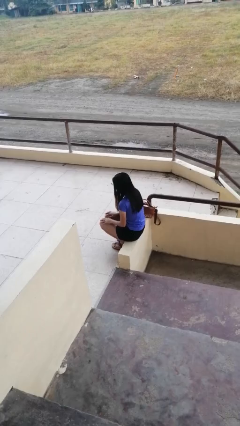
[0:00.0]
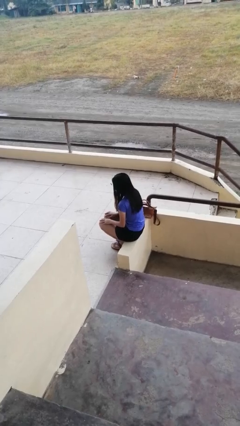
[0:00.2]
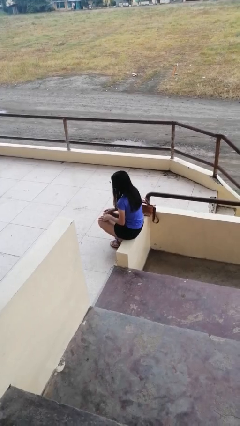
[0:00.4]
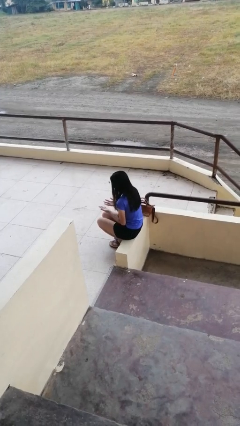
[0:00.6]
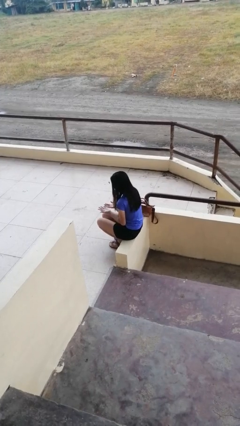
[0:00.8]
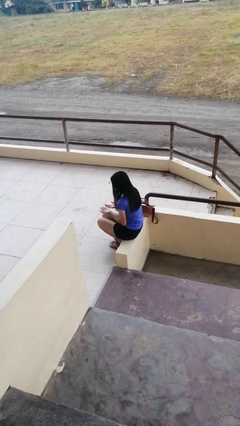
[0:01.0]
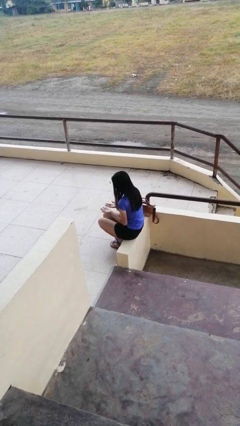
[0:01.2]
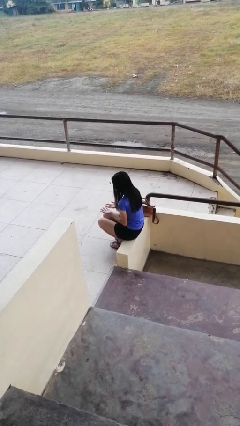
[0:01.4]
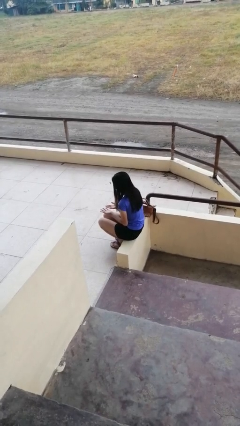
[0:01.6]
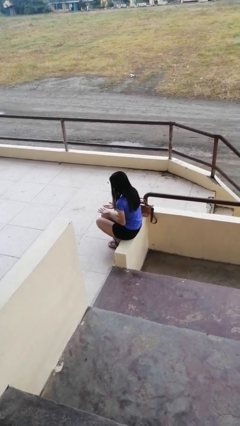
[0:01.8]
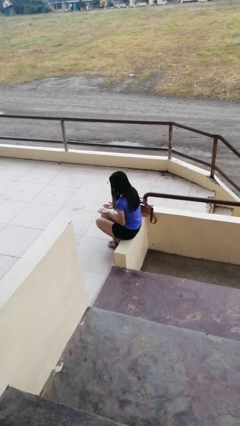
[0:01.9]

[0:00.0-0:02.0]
person looks at hands in lap

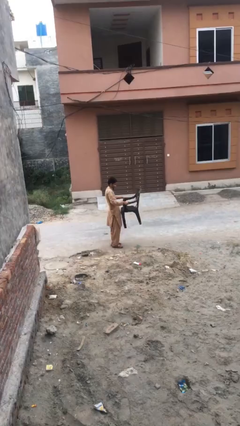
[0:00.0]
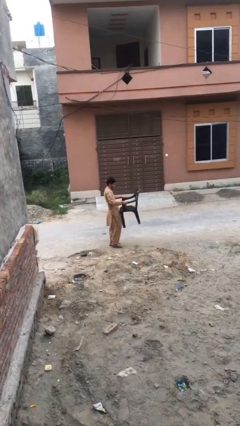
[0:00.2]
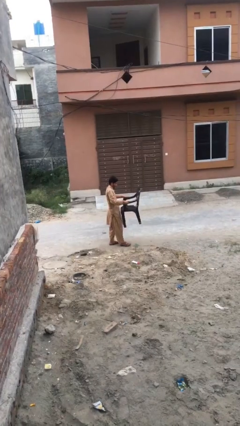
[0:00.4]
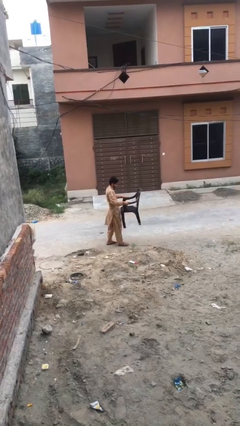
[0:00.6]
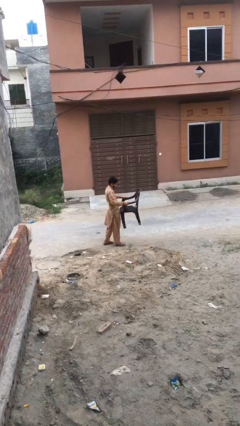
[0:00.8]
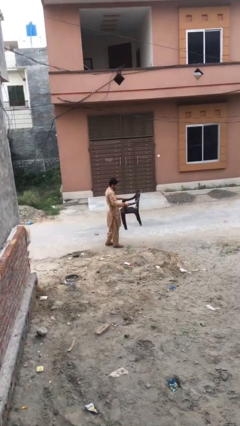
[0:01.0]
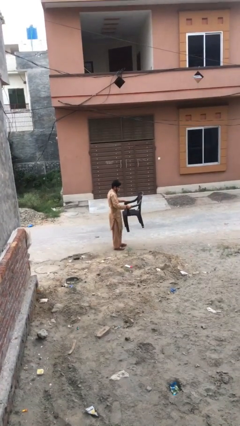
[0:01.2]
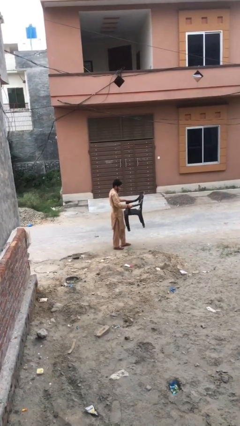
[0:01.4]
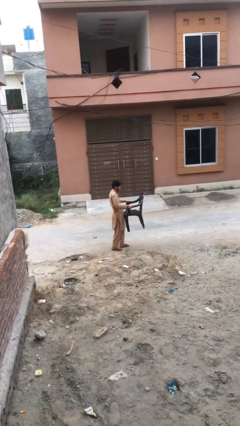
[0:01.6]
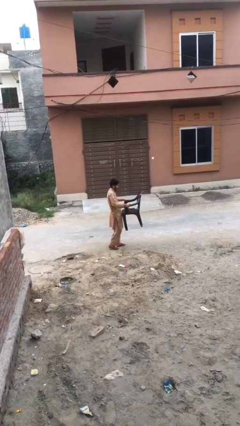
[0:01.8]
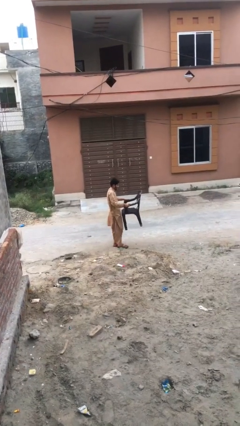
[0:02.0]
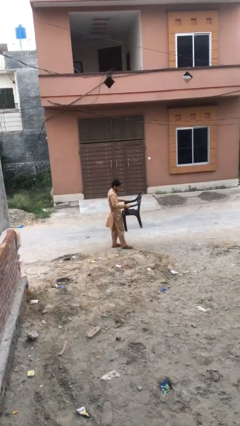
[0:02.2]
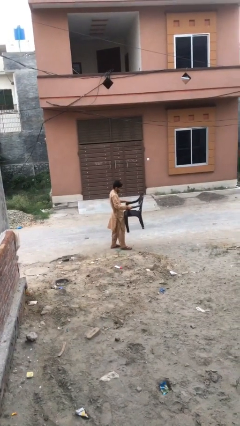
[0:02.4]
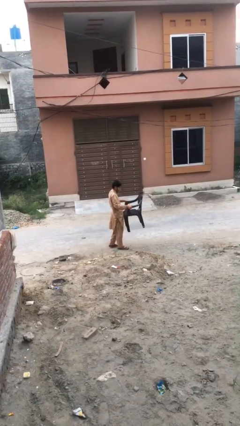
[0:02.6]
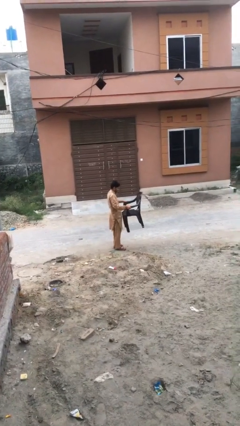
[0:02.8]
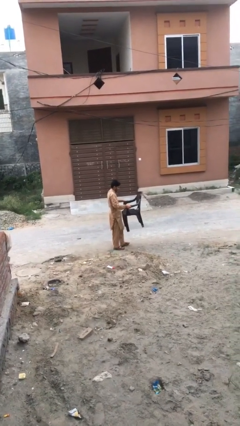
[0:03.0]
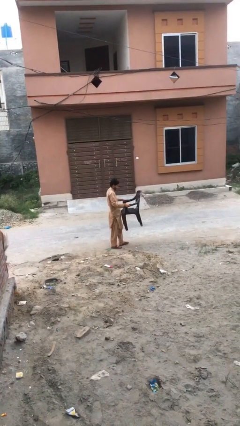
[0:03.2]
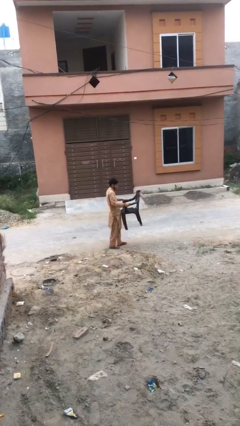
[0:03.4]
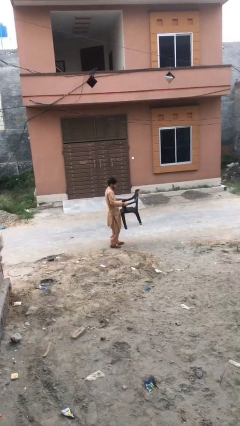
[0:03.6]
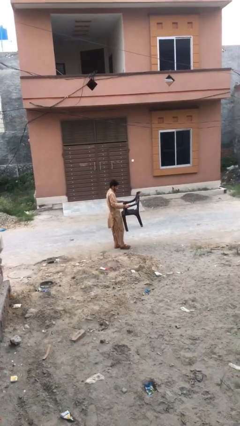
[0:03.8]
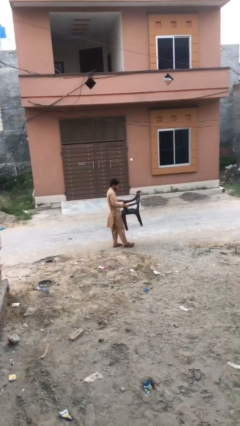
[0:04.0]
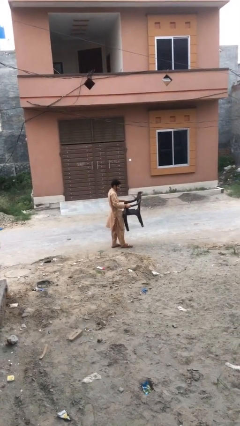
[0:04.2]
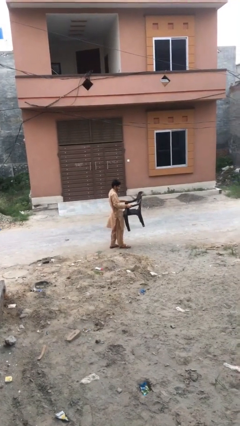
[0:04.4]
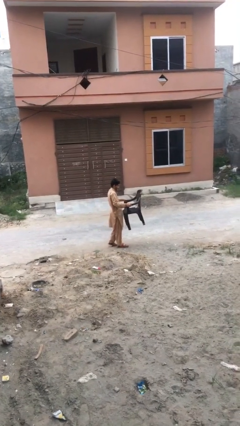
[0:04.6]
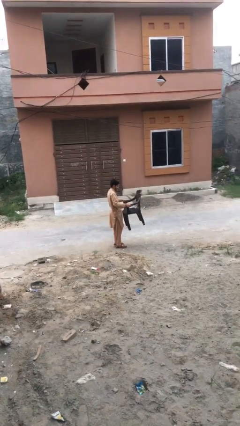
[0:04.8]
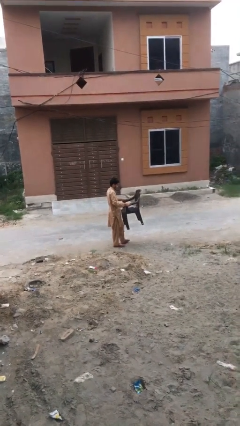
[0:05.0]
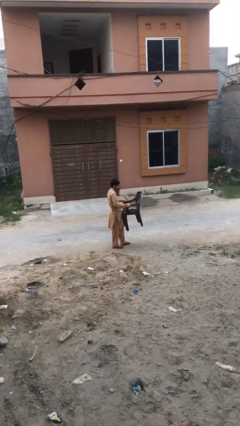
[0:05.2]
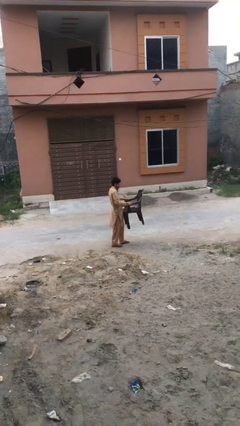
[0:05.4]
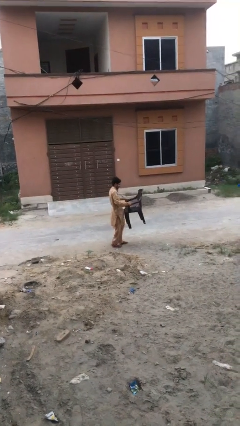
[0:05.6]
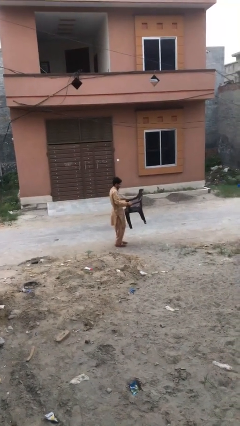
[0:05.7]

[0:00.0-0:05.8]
person carries heavy object

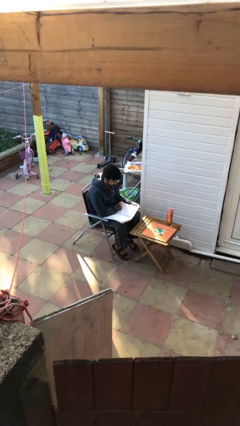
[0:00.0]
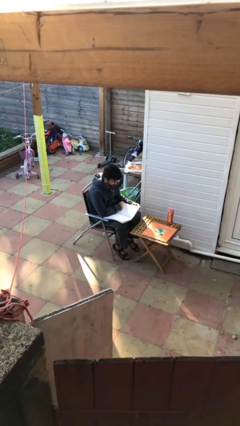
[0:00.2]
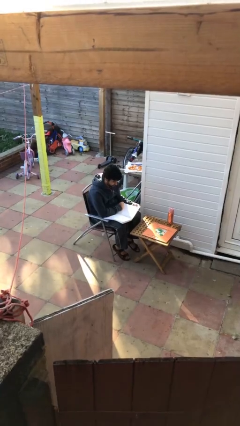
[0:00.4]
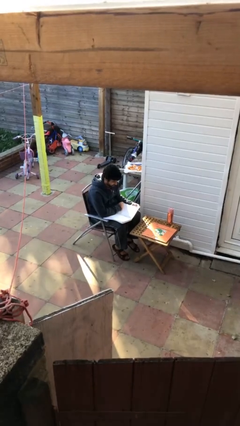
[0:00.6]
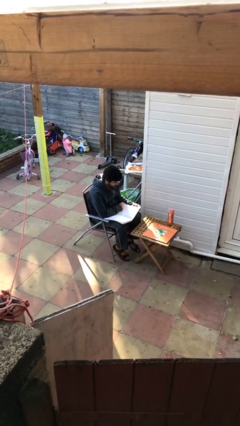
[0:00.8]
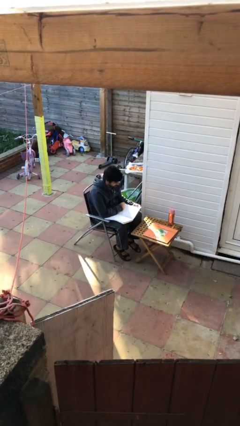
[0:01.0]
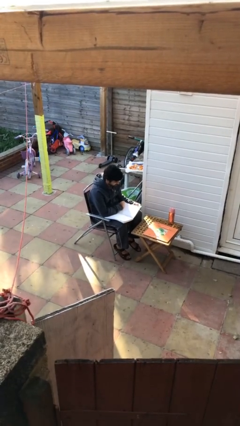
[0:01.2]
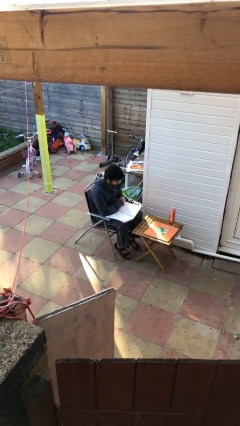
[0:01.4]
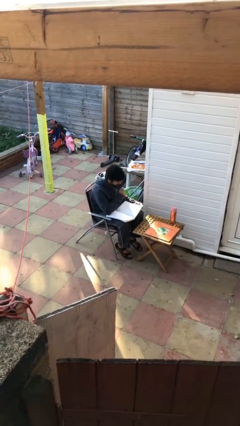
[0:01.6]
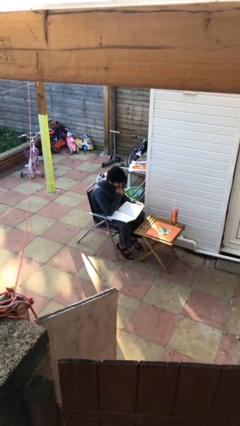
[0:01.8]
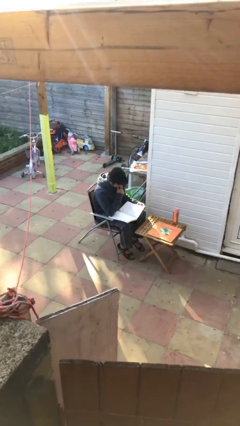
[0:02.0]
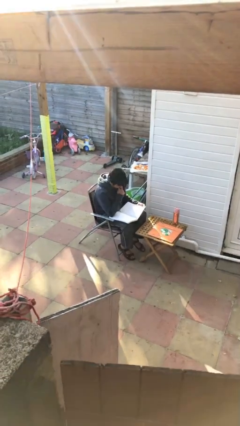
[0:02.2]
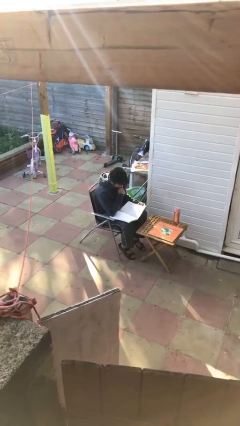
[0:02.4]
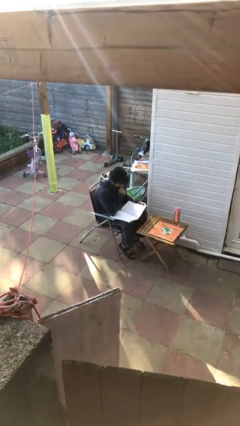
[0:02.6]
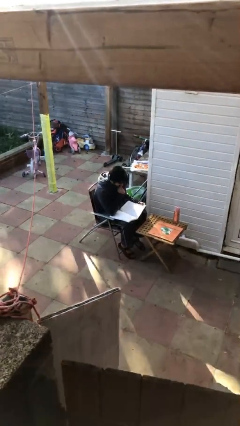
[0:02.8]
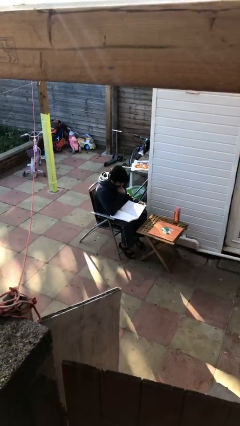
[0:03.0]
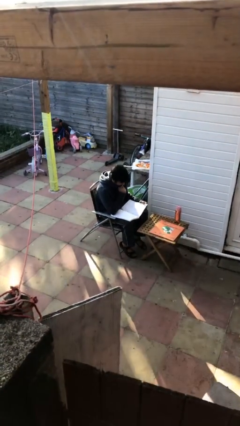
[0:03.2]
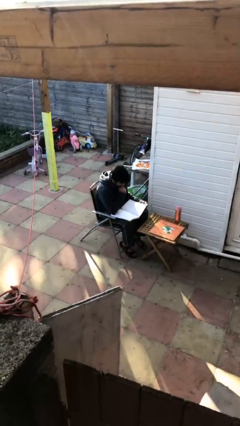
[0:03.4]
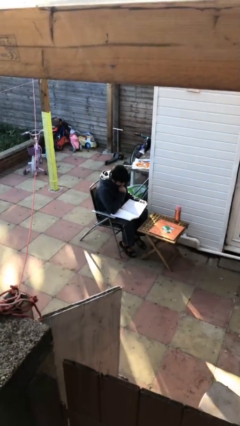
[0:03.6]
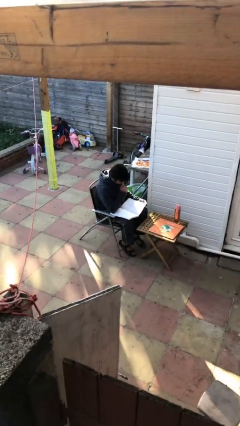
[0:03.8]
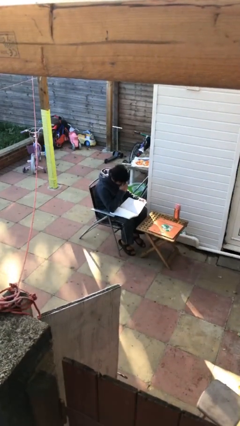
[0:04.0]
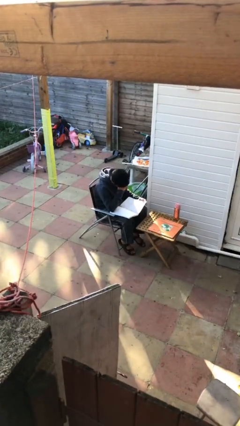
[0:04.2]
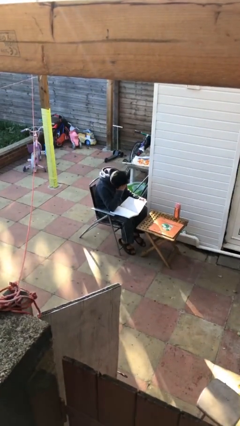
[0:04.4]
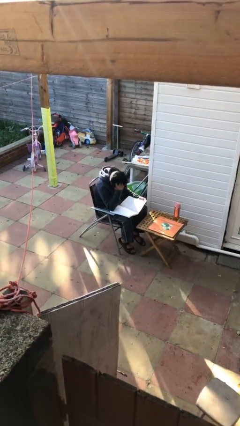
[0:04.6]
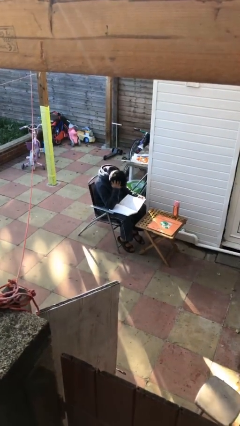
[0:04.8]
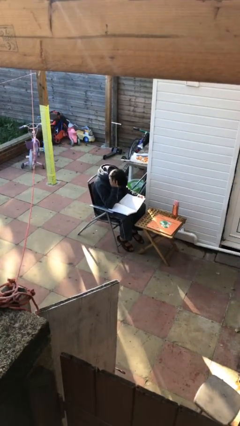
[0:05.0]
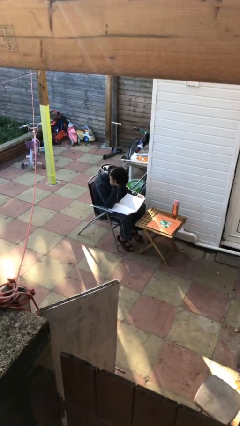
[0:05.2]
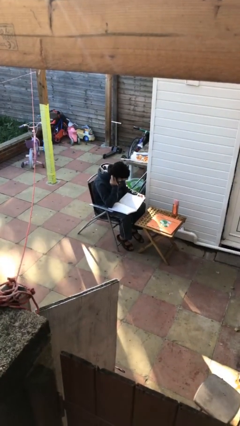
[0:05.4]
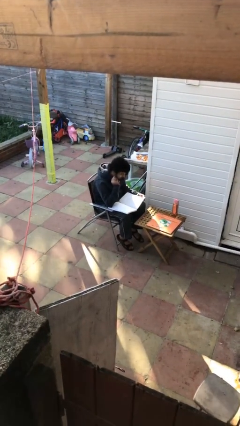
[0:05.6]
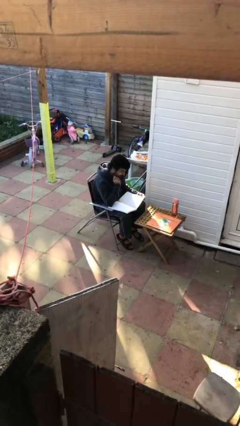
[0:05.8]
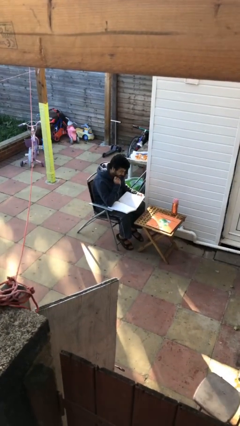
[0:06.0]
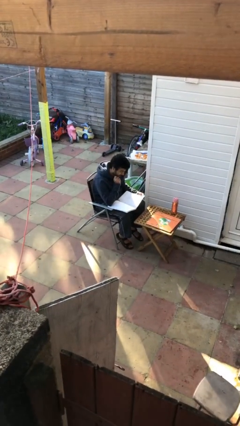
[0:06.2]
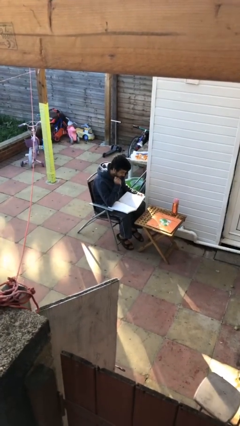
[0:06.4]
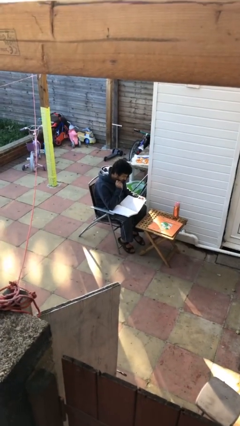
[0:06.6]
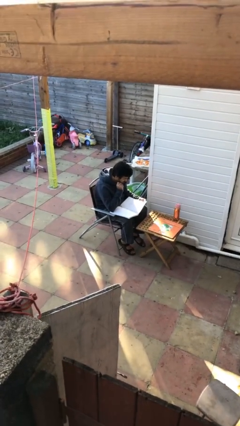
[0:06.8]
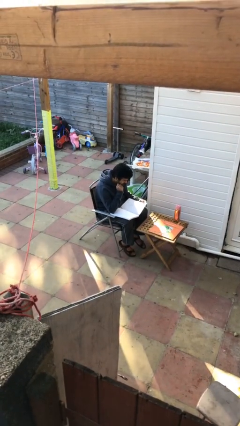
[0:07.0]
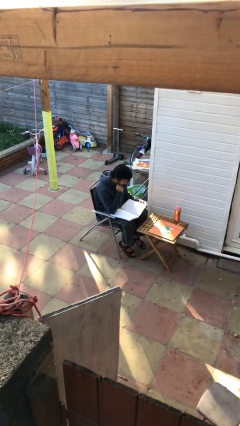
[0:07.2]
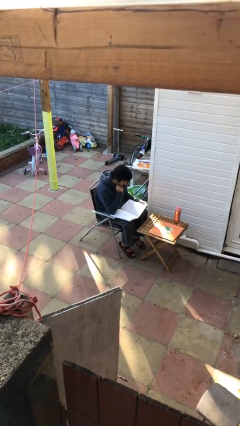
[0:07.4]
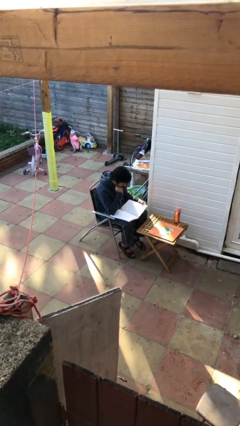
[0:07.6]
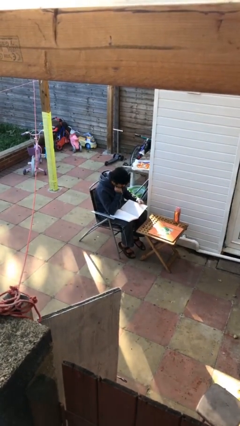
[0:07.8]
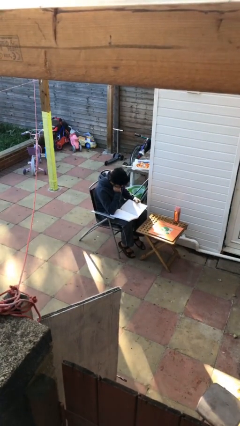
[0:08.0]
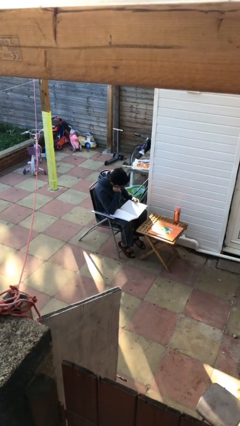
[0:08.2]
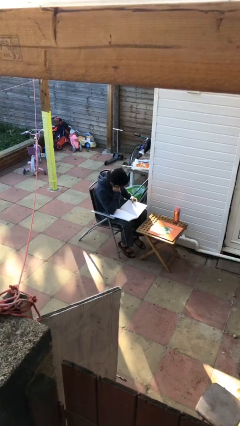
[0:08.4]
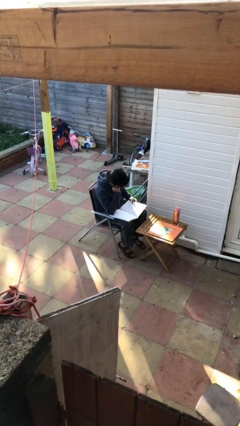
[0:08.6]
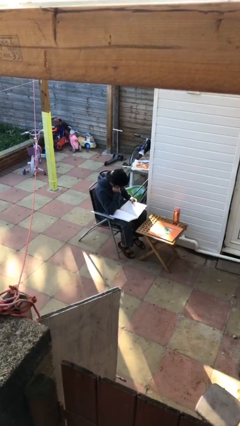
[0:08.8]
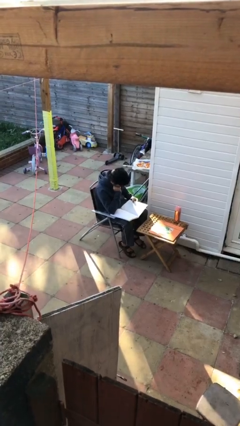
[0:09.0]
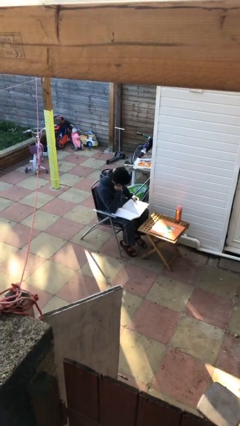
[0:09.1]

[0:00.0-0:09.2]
person reads document

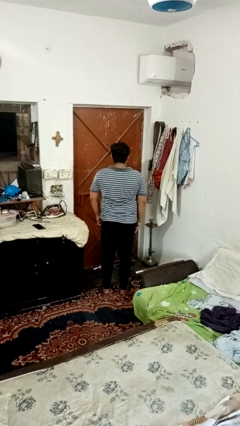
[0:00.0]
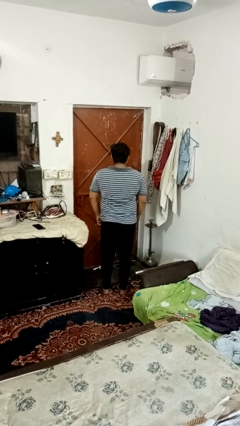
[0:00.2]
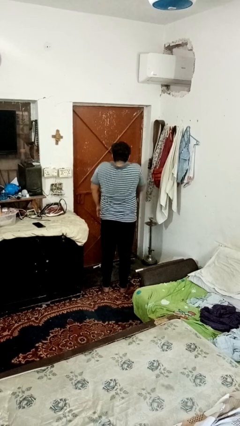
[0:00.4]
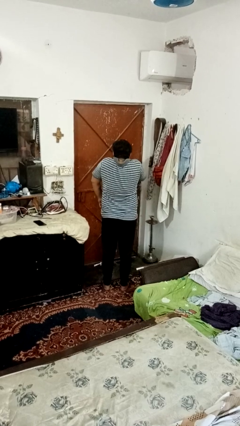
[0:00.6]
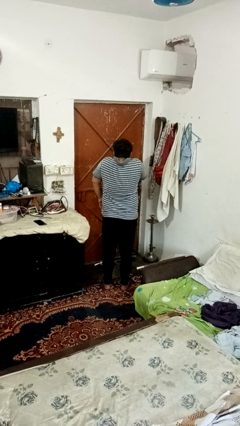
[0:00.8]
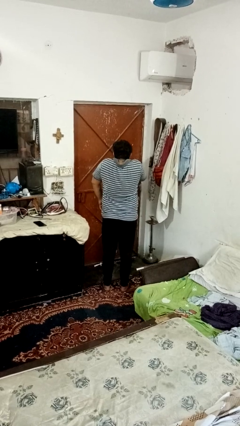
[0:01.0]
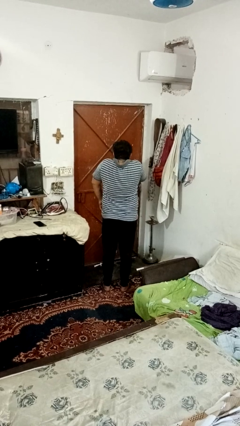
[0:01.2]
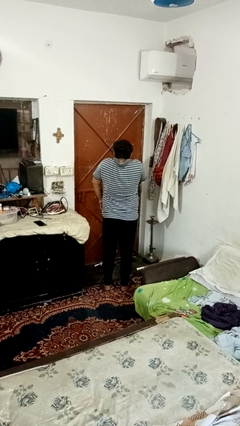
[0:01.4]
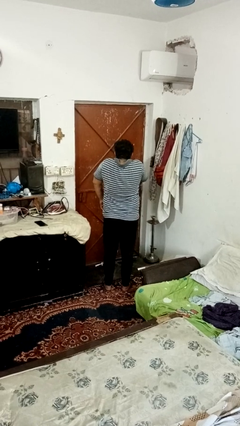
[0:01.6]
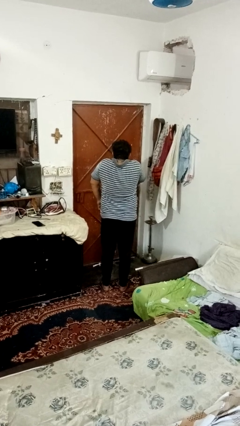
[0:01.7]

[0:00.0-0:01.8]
person shrugs
